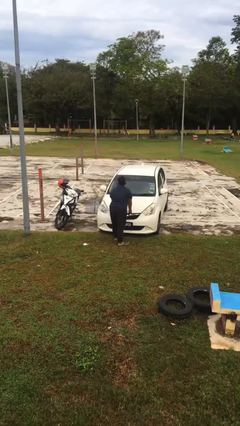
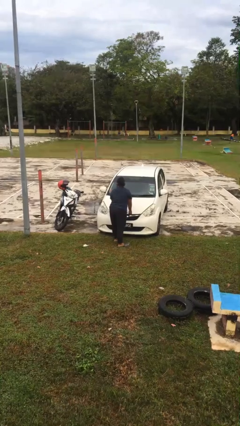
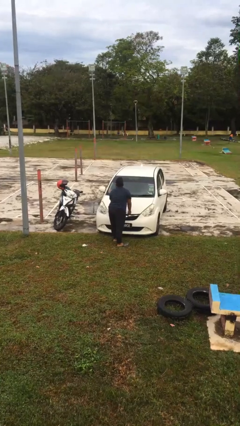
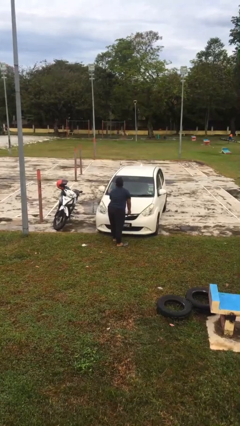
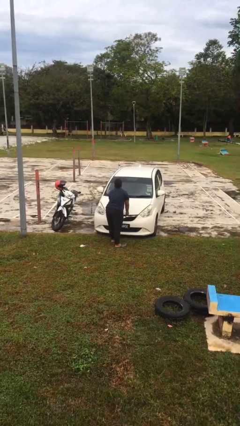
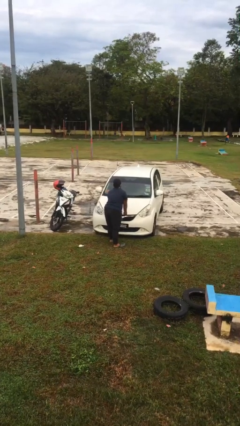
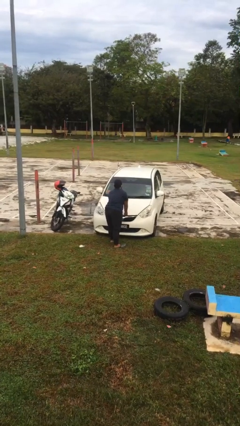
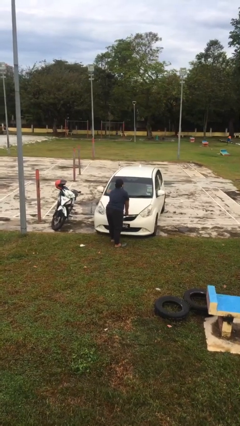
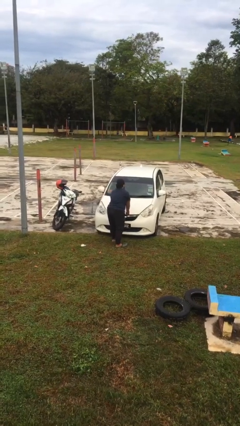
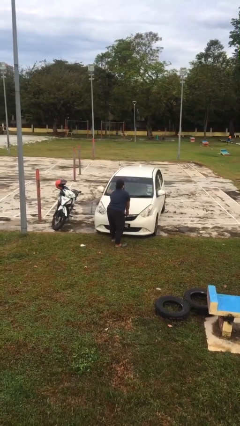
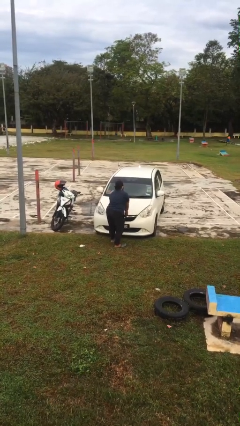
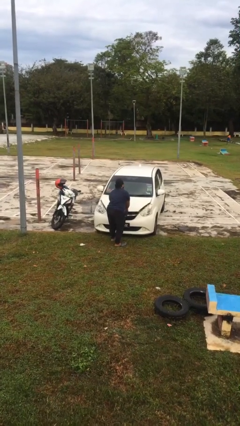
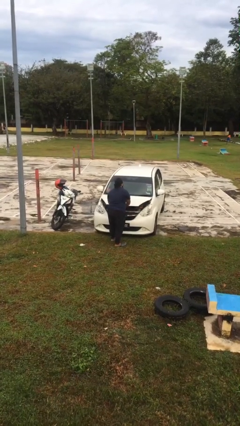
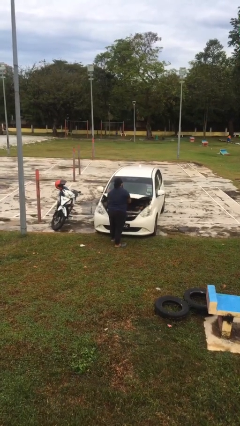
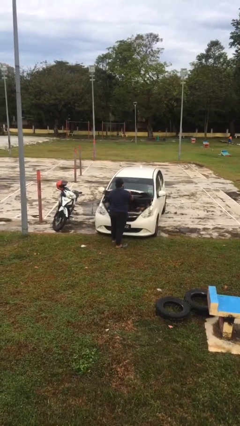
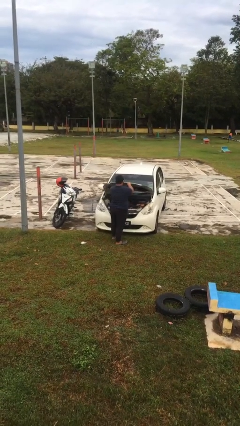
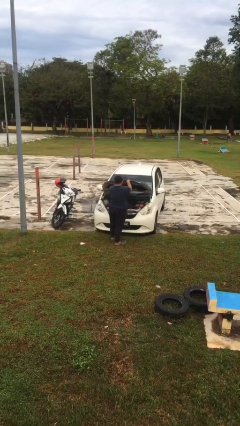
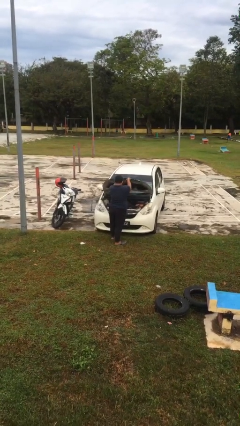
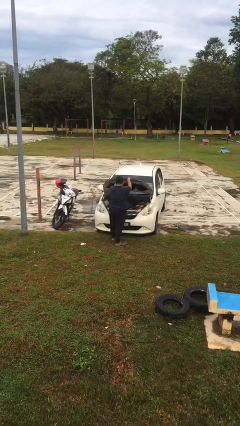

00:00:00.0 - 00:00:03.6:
person opens car hood

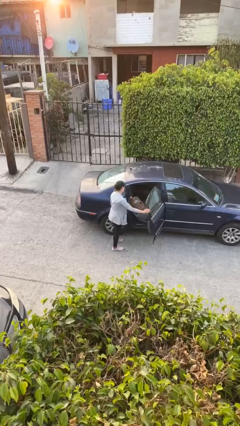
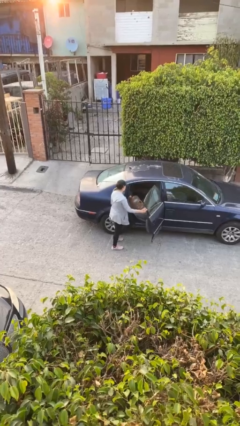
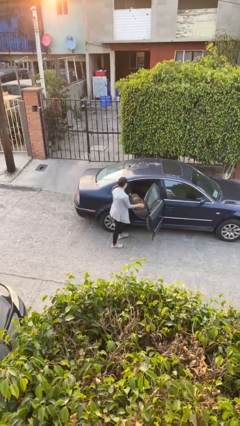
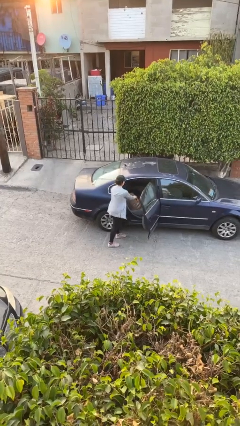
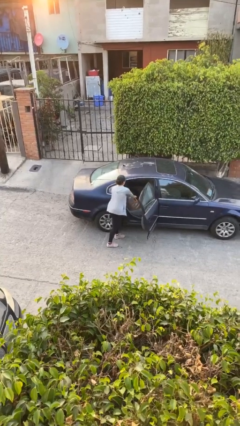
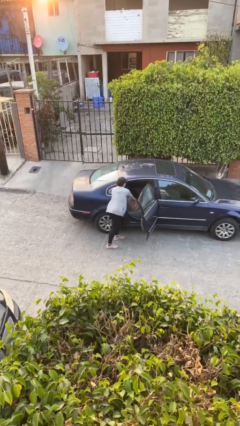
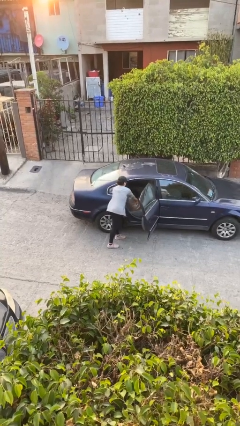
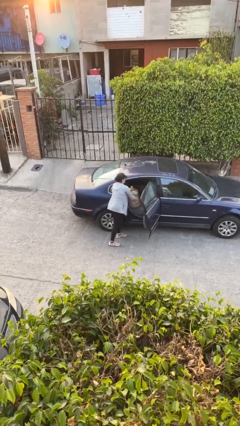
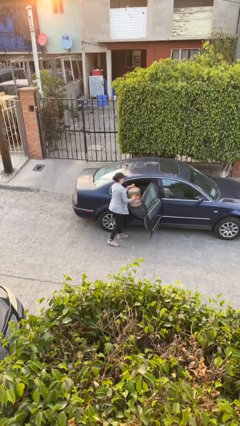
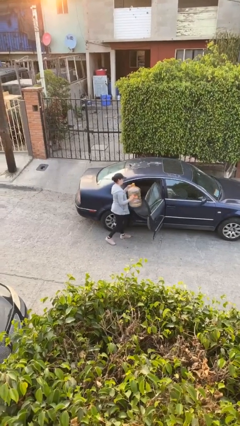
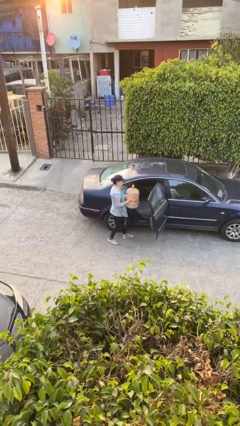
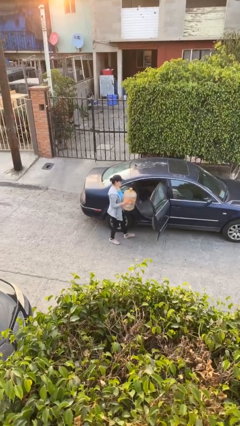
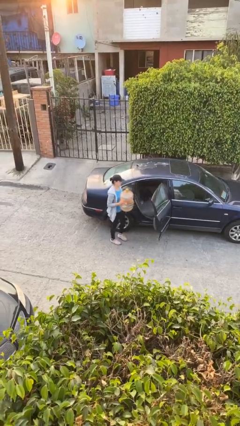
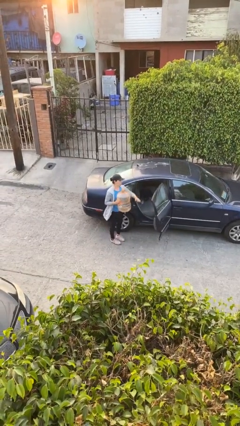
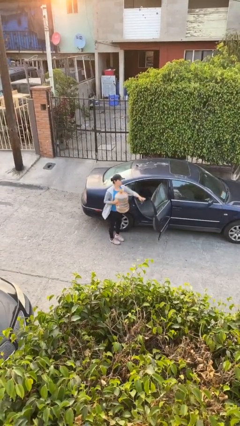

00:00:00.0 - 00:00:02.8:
person unloads car

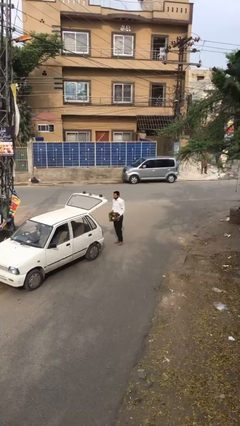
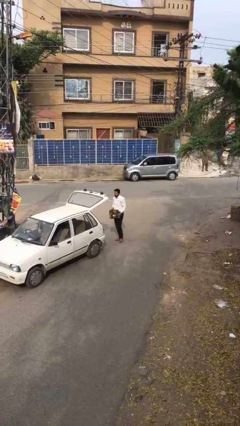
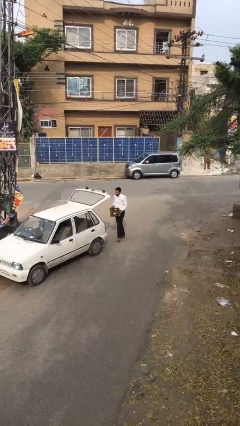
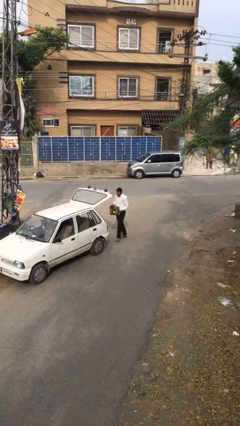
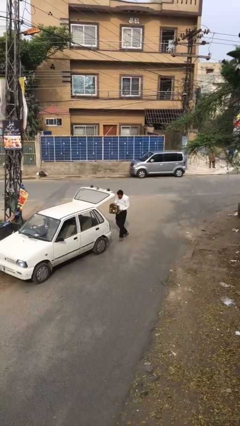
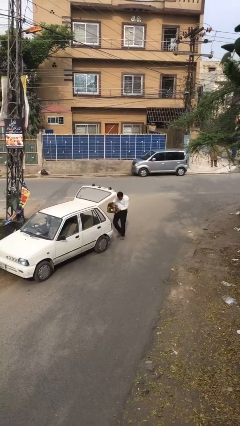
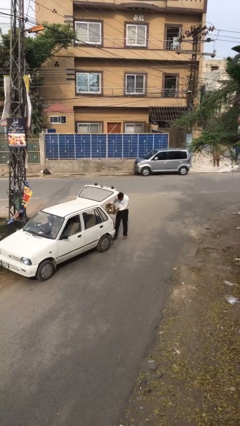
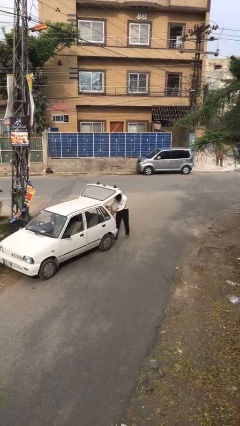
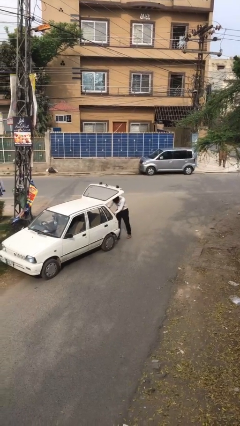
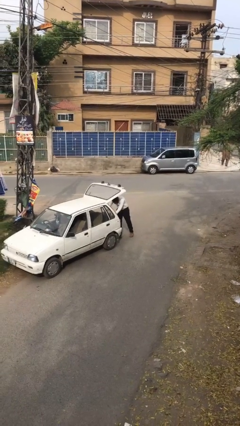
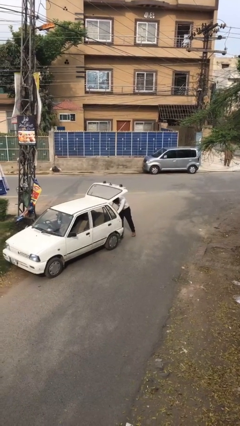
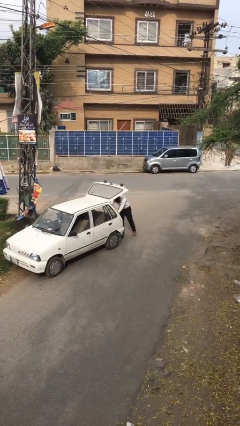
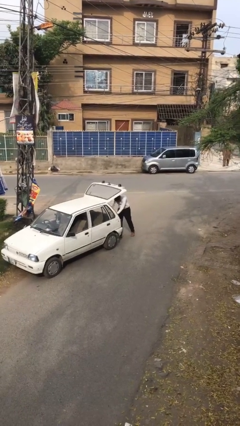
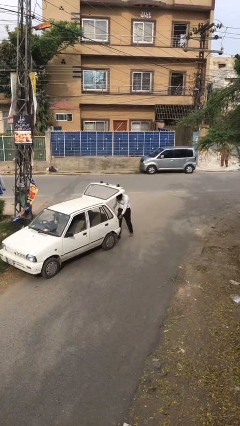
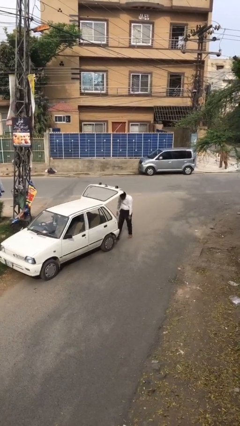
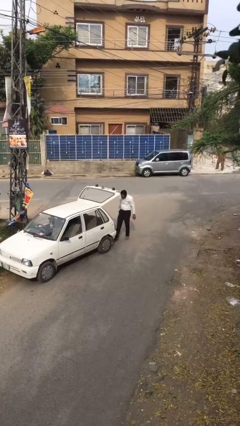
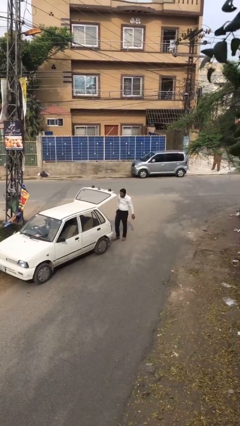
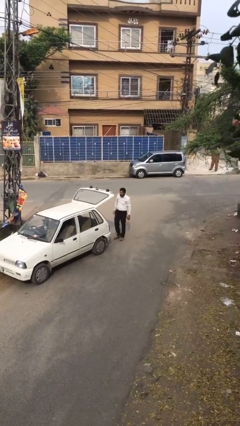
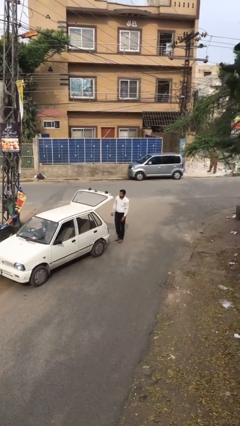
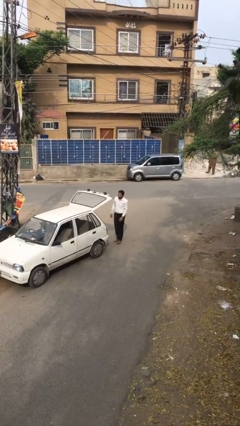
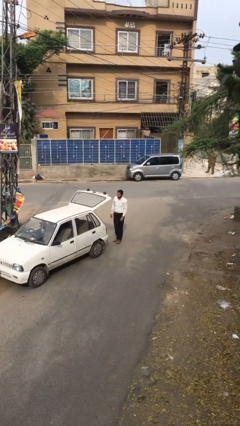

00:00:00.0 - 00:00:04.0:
person loads car

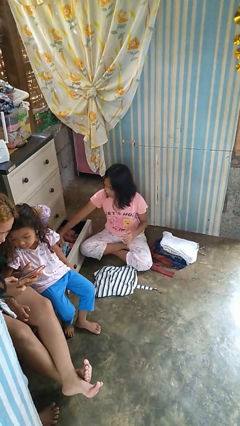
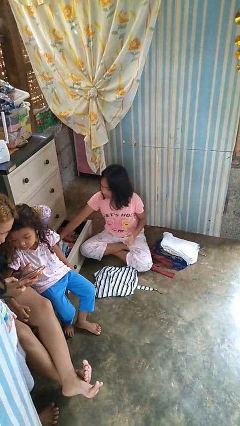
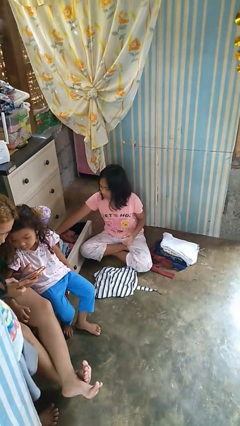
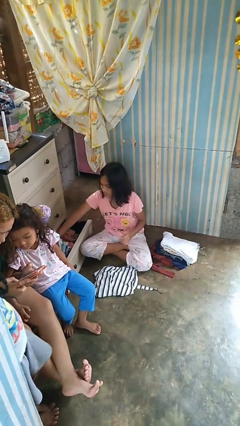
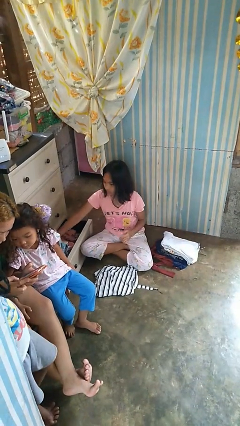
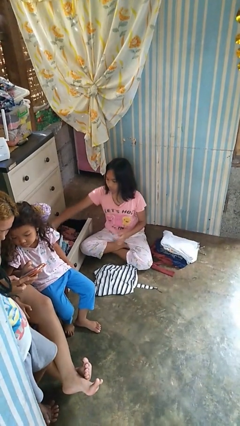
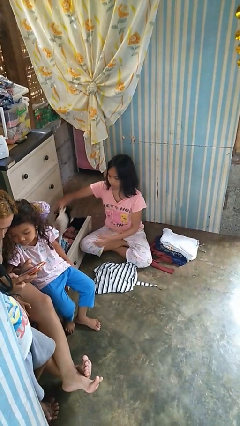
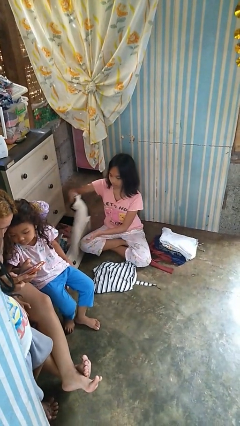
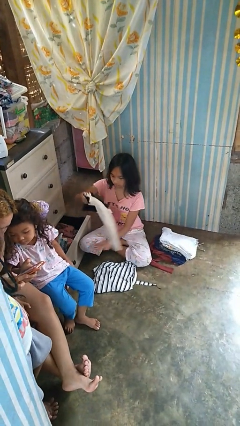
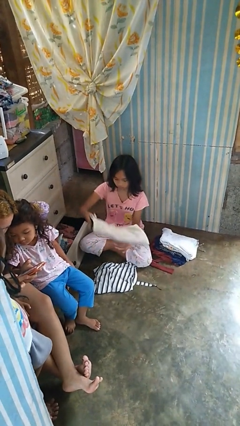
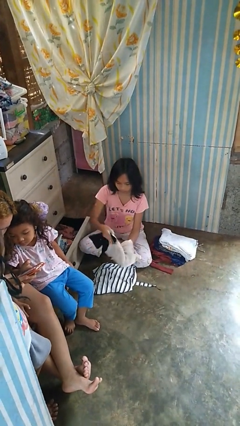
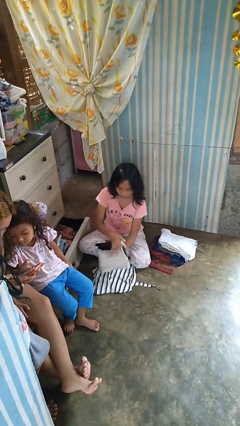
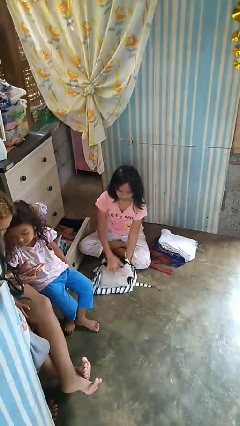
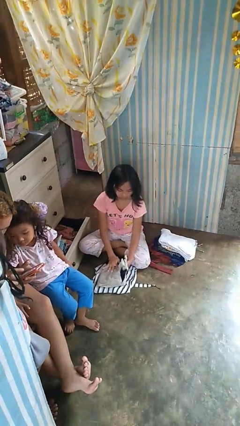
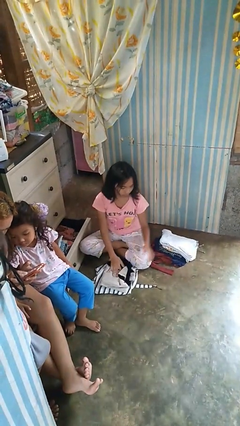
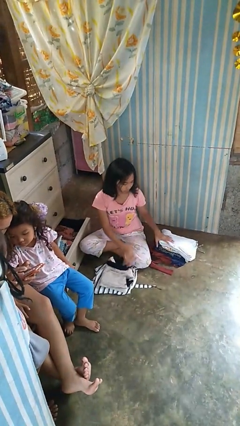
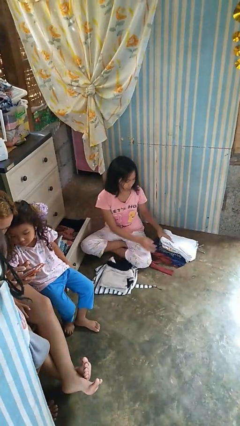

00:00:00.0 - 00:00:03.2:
person takes clothes from dresser

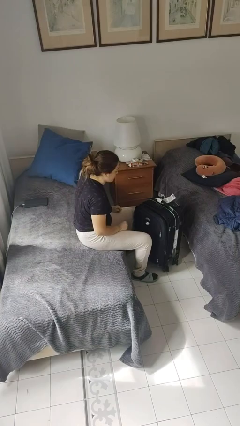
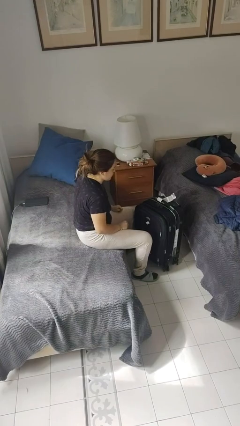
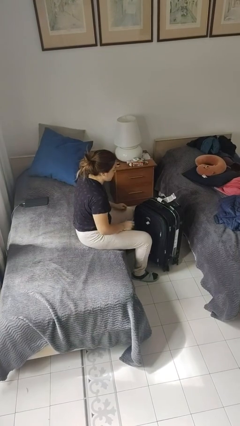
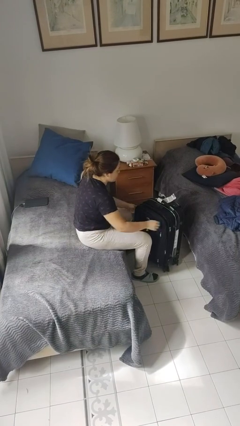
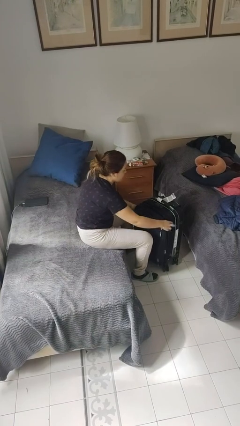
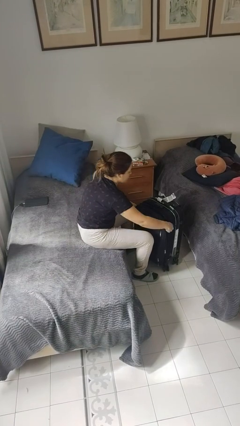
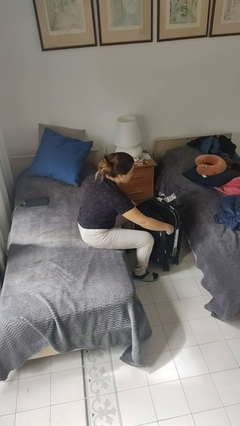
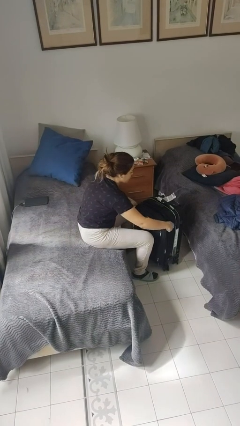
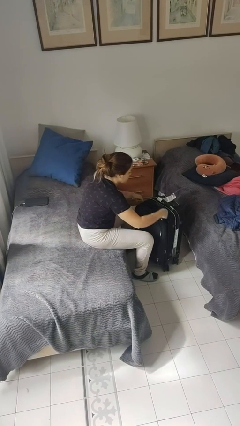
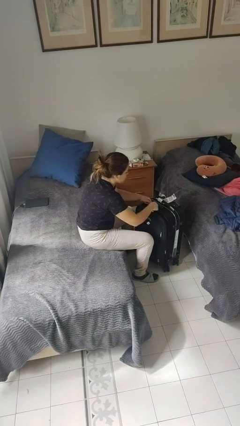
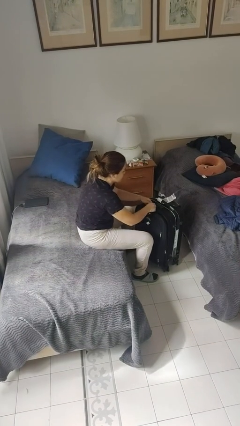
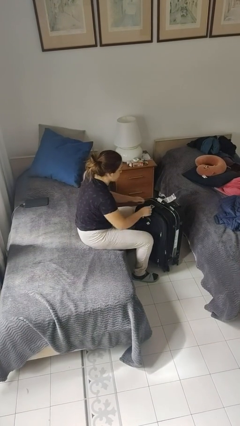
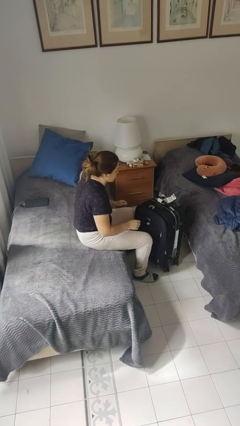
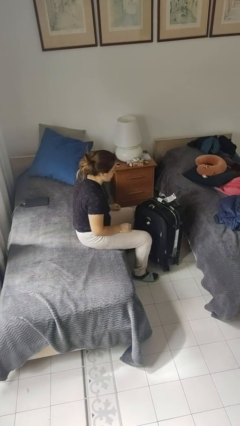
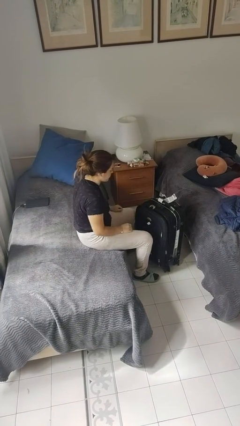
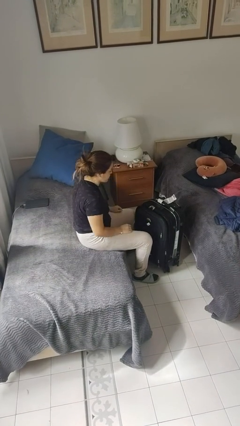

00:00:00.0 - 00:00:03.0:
person closes suitcase

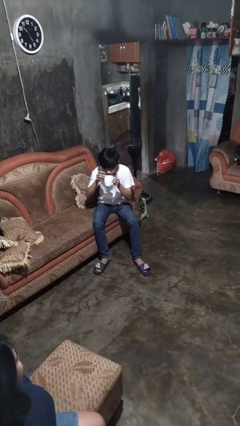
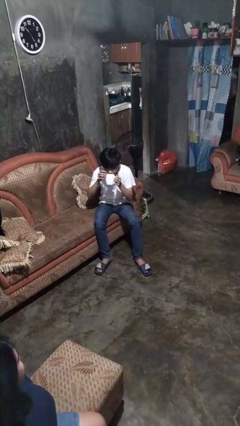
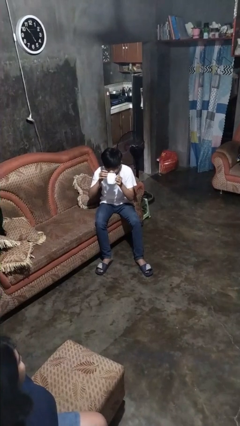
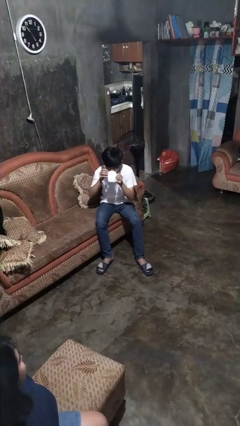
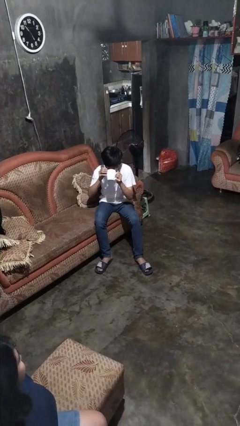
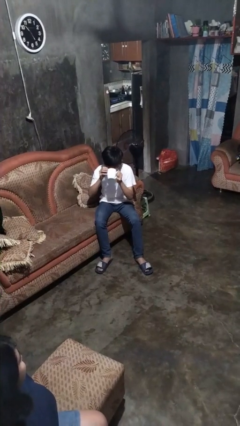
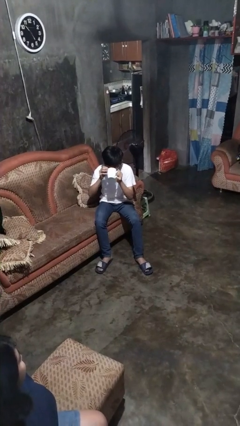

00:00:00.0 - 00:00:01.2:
person drinks from mug

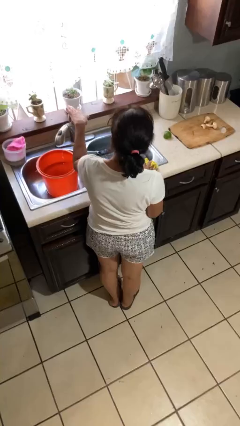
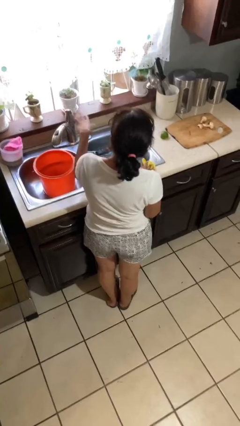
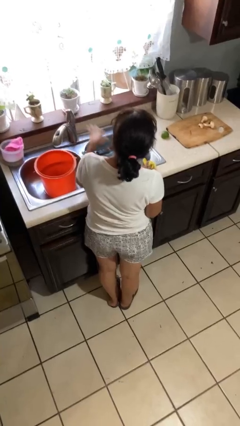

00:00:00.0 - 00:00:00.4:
person turns off faucet
